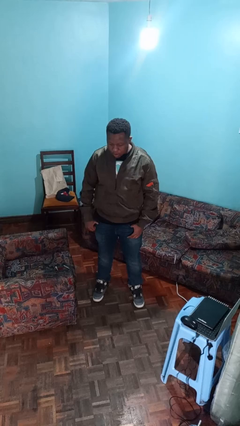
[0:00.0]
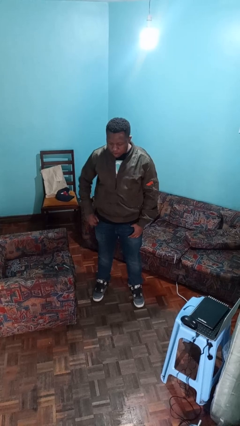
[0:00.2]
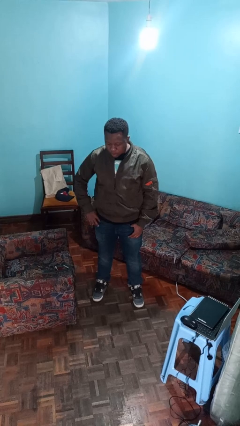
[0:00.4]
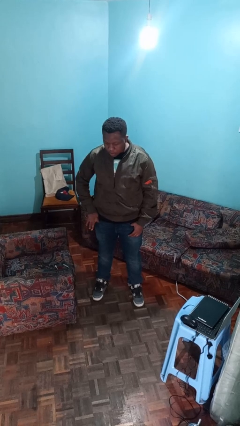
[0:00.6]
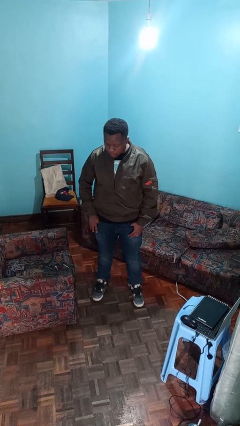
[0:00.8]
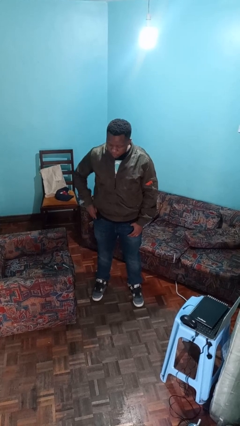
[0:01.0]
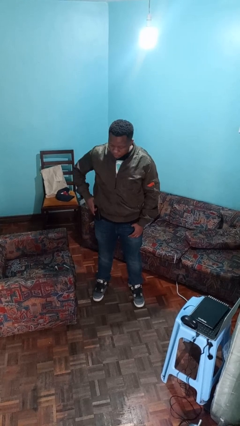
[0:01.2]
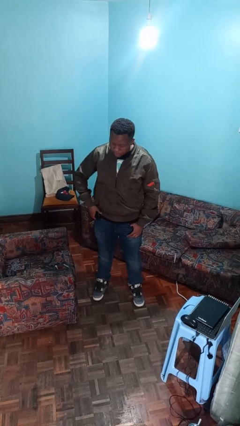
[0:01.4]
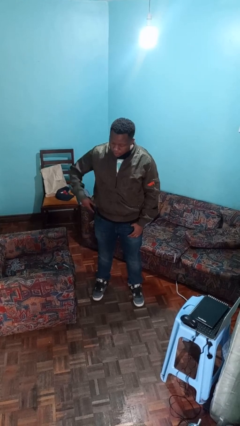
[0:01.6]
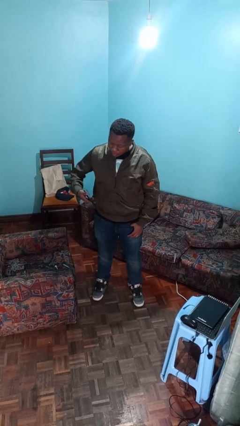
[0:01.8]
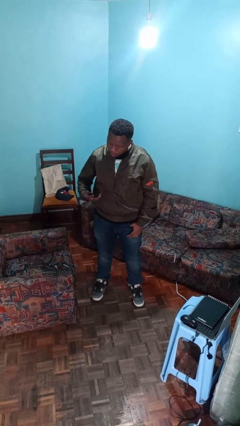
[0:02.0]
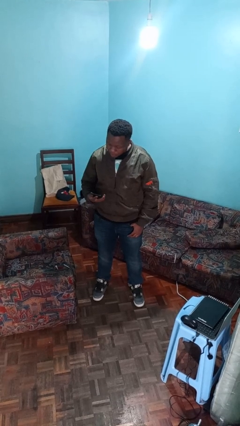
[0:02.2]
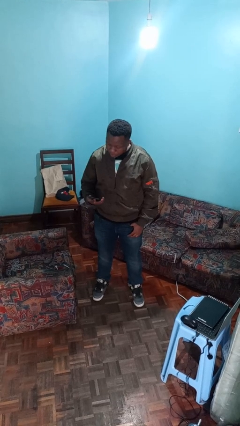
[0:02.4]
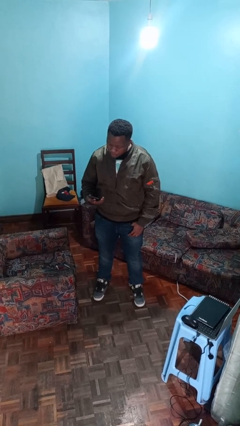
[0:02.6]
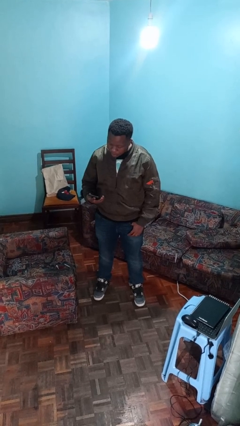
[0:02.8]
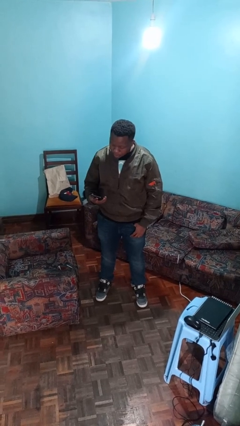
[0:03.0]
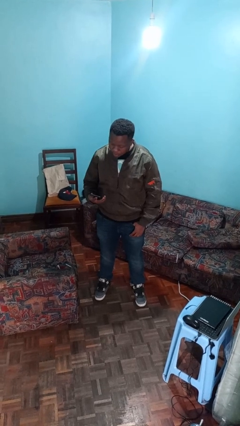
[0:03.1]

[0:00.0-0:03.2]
person takes phone from pocket

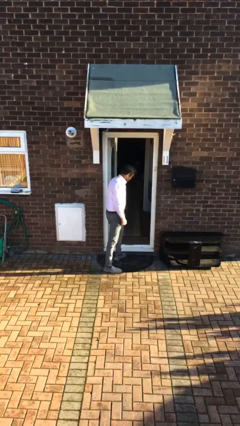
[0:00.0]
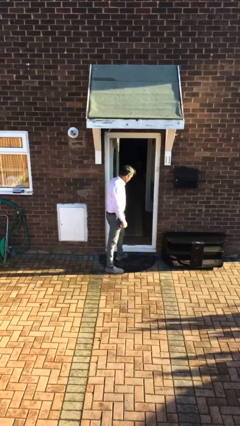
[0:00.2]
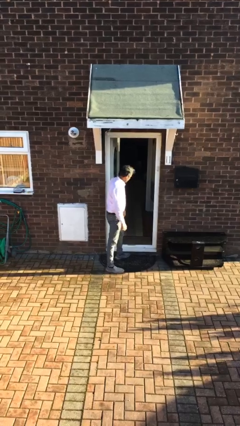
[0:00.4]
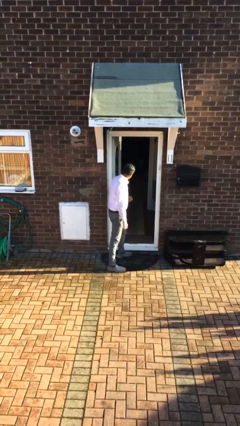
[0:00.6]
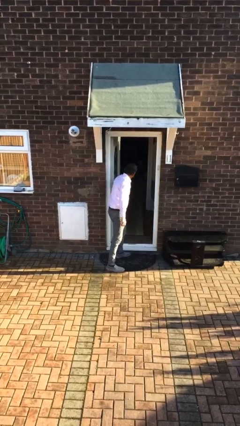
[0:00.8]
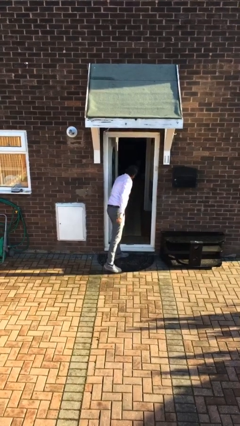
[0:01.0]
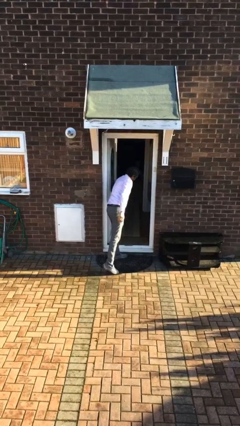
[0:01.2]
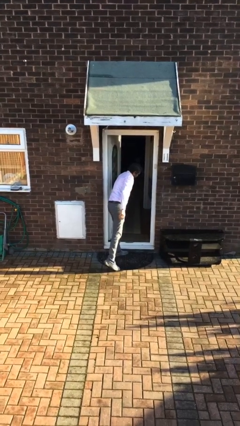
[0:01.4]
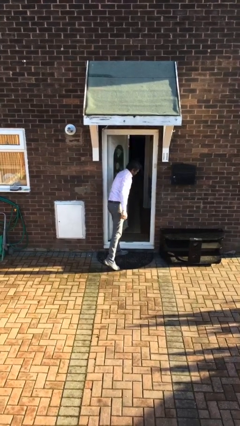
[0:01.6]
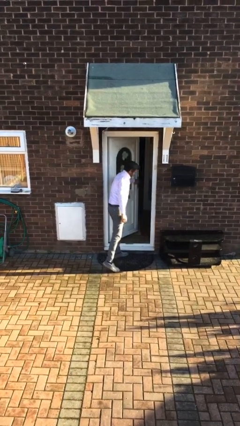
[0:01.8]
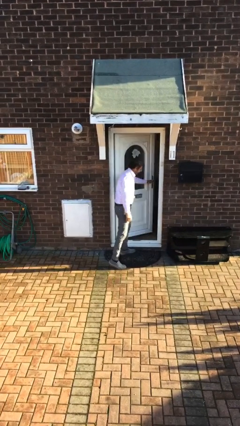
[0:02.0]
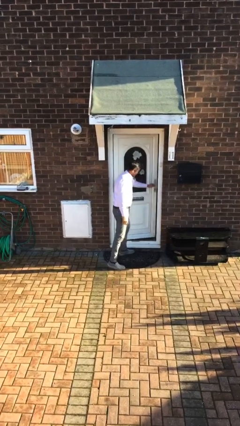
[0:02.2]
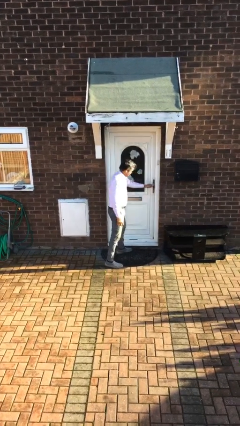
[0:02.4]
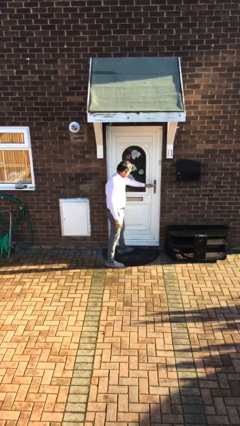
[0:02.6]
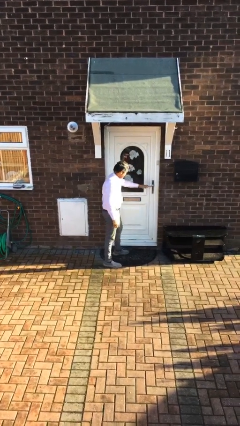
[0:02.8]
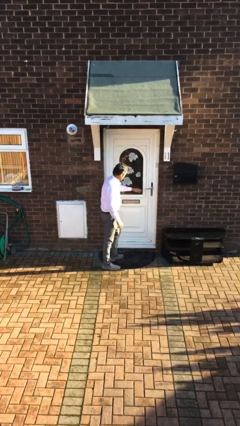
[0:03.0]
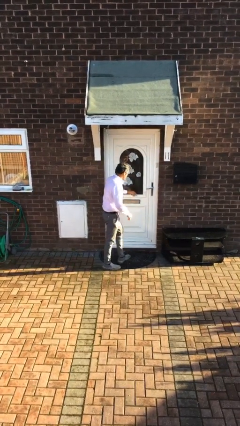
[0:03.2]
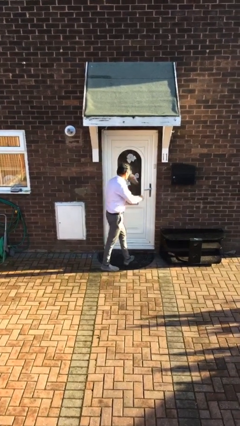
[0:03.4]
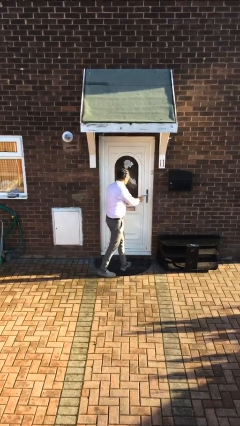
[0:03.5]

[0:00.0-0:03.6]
person closes facility door

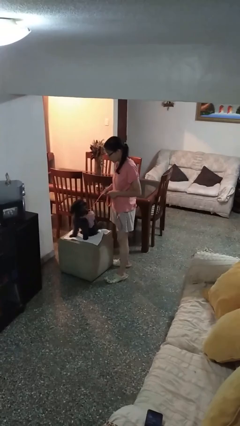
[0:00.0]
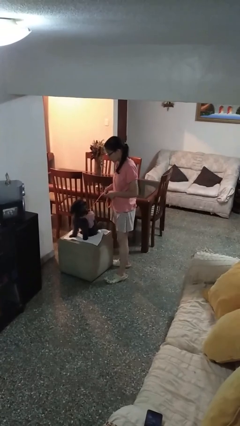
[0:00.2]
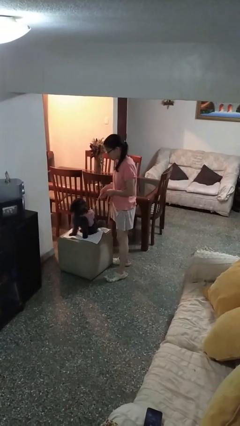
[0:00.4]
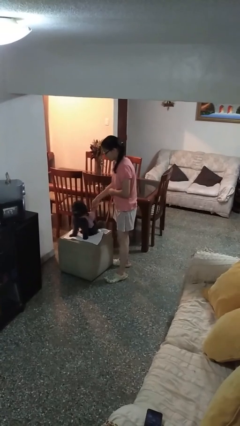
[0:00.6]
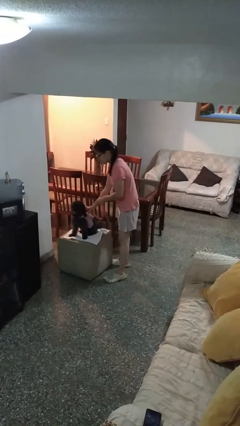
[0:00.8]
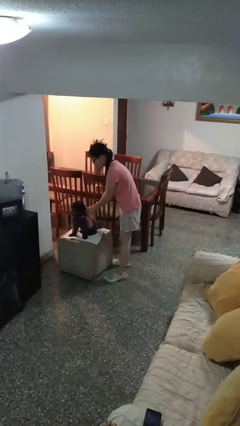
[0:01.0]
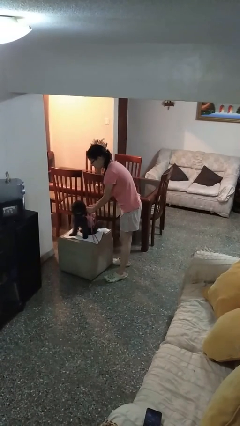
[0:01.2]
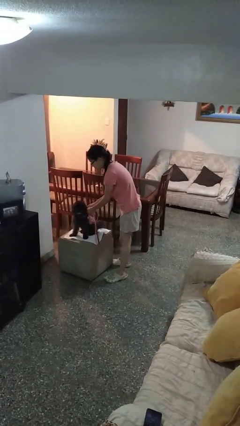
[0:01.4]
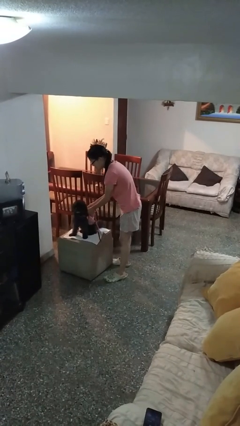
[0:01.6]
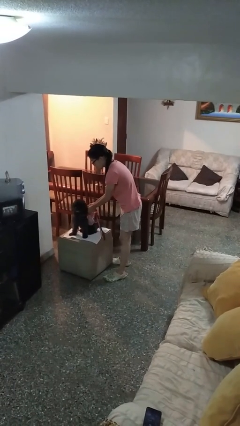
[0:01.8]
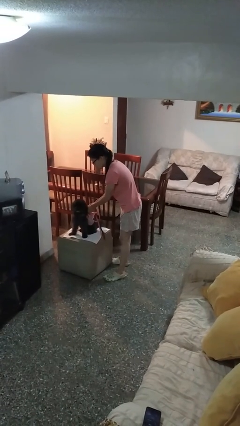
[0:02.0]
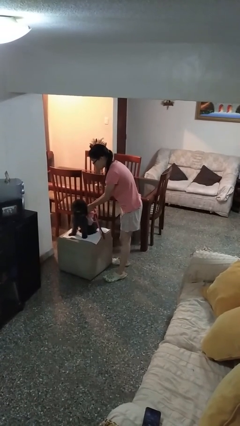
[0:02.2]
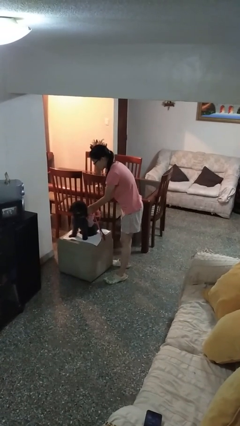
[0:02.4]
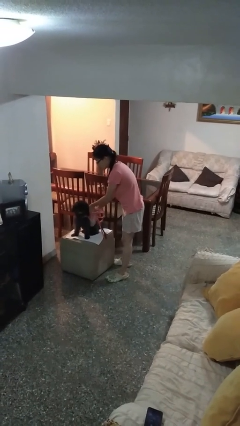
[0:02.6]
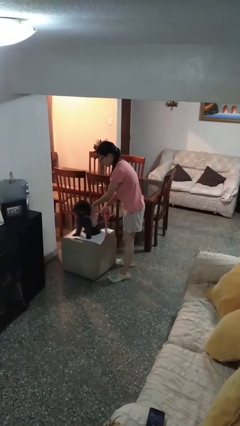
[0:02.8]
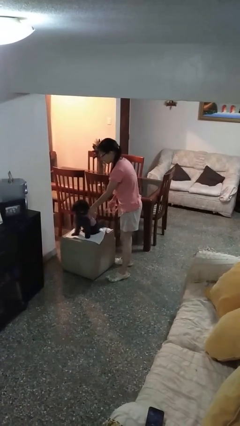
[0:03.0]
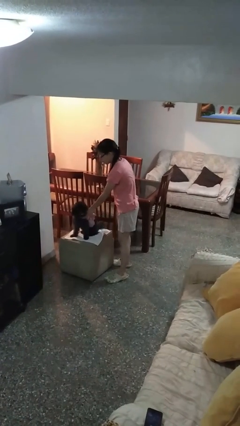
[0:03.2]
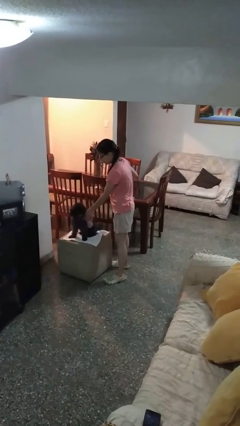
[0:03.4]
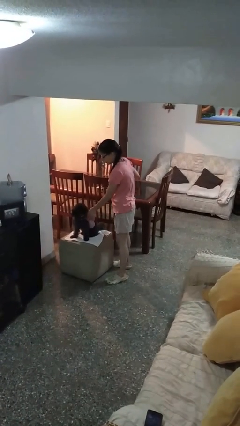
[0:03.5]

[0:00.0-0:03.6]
person unattaches leash from dog

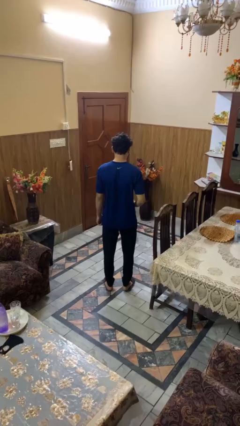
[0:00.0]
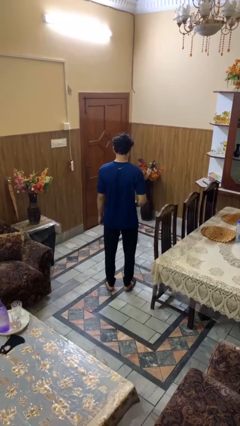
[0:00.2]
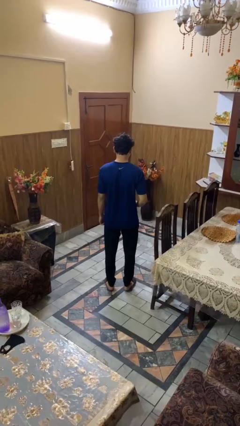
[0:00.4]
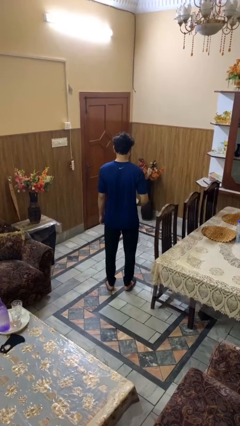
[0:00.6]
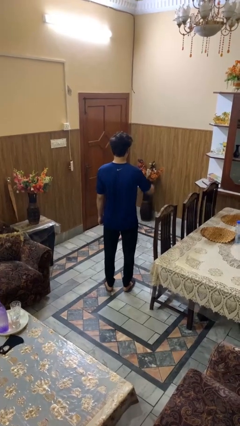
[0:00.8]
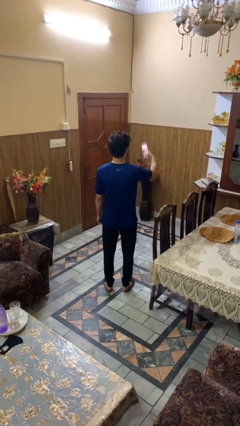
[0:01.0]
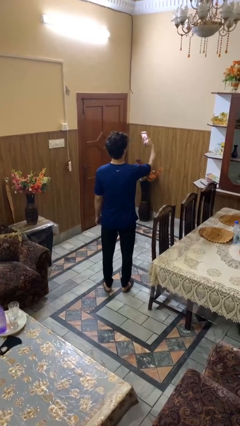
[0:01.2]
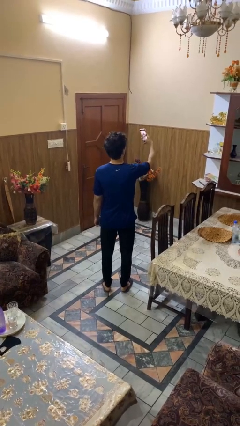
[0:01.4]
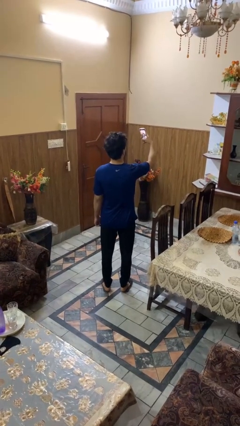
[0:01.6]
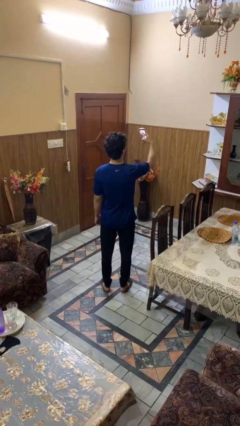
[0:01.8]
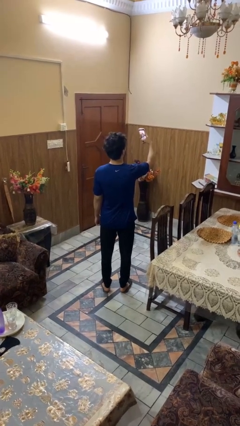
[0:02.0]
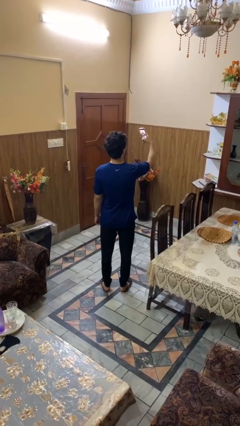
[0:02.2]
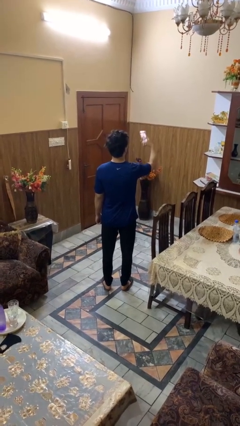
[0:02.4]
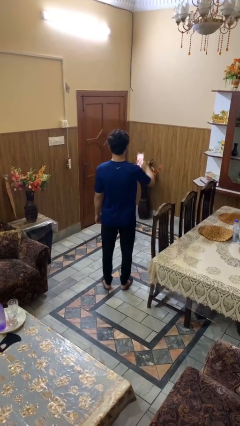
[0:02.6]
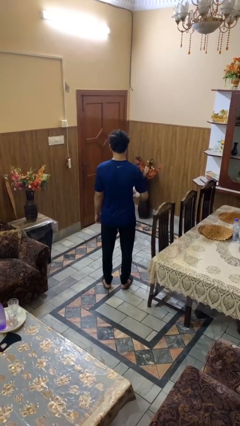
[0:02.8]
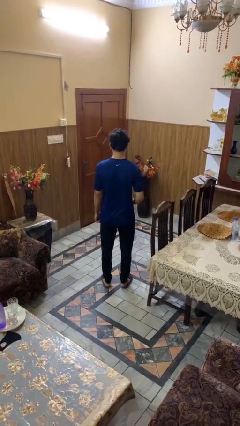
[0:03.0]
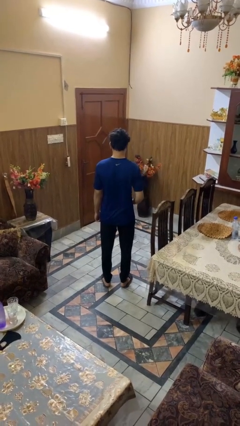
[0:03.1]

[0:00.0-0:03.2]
person takes selfie

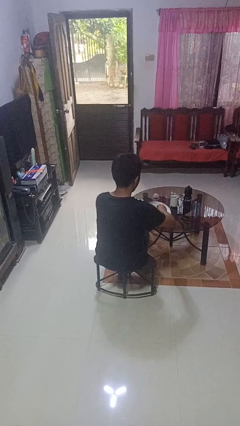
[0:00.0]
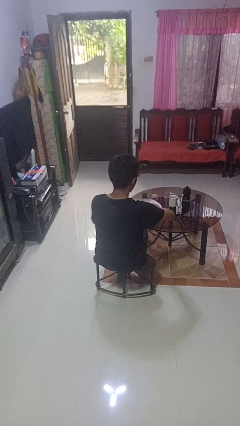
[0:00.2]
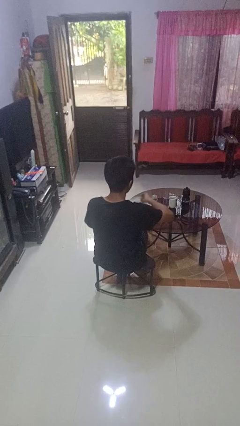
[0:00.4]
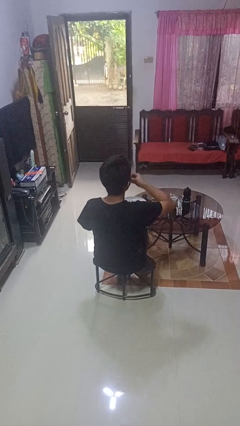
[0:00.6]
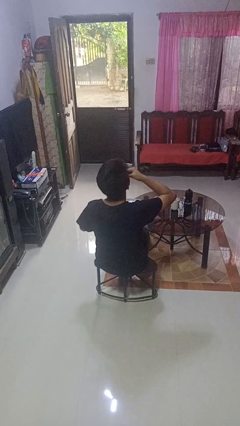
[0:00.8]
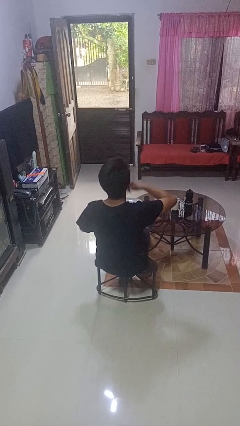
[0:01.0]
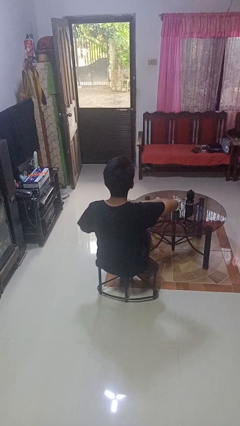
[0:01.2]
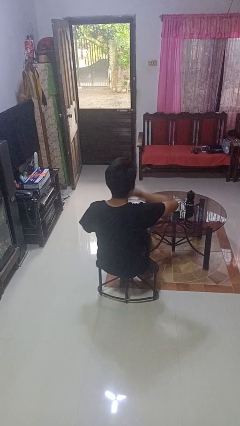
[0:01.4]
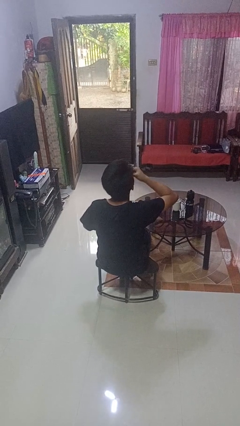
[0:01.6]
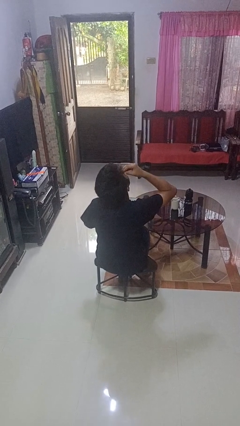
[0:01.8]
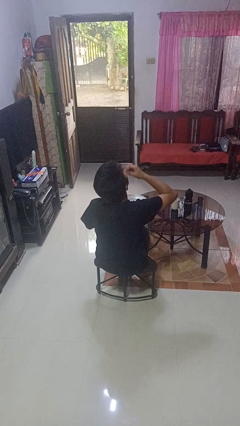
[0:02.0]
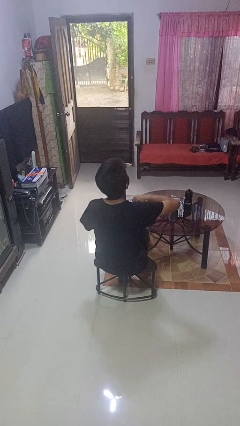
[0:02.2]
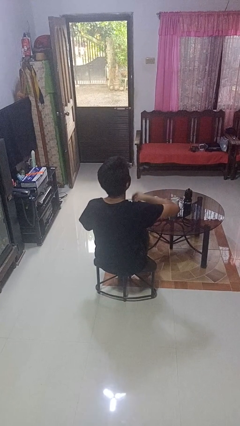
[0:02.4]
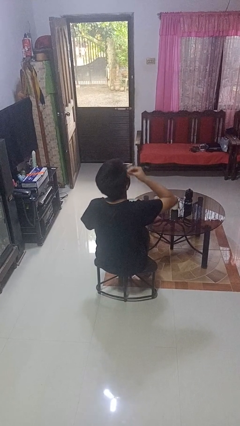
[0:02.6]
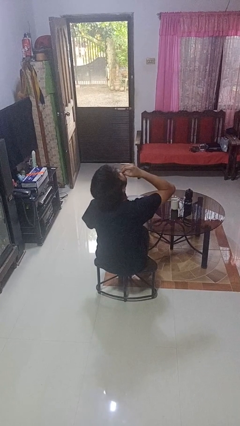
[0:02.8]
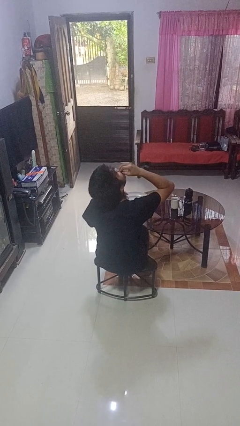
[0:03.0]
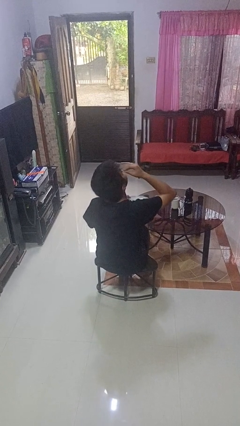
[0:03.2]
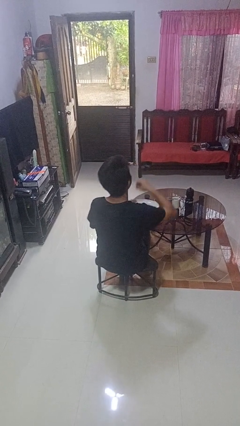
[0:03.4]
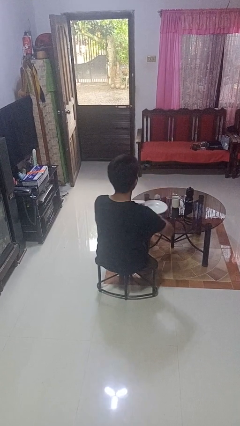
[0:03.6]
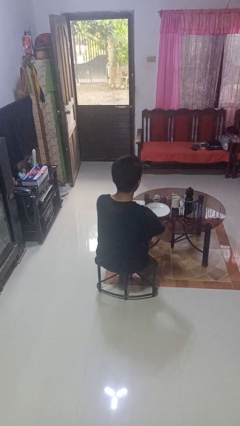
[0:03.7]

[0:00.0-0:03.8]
person eats with hands

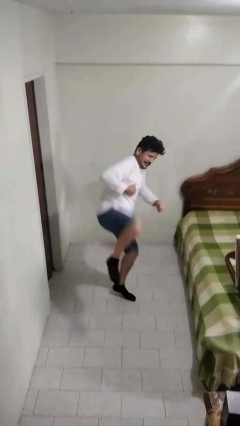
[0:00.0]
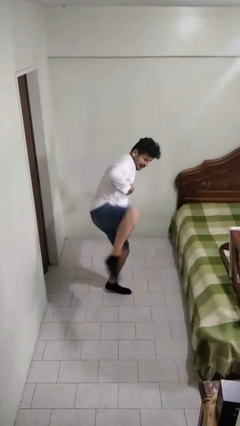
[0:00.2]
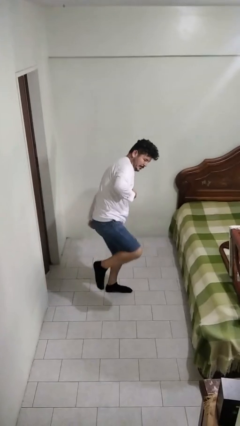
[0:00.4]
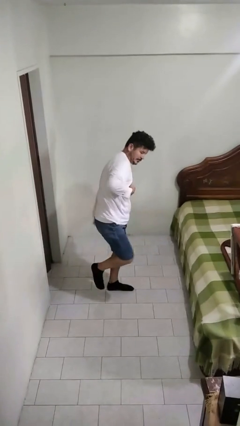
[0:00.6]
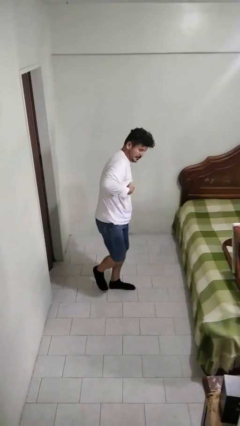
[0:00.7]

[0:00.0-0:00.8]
person karate kicks
